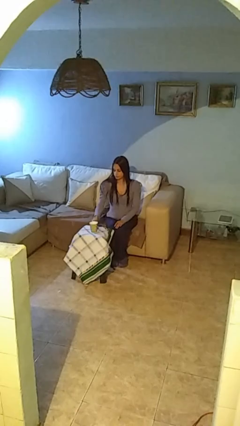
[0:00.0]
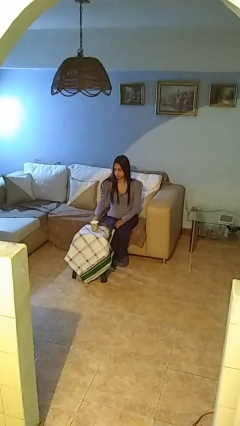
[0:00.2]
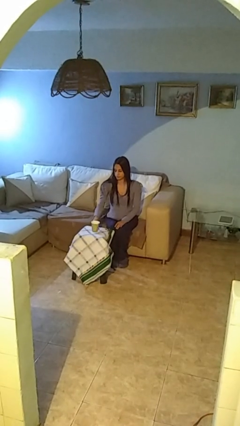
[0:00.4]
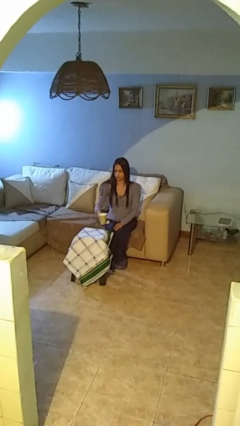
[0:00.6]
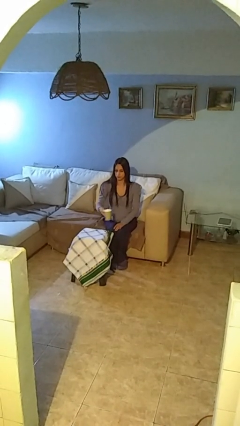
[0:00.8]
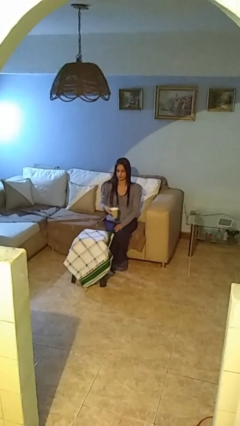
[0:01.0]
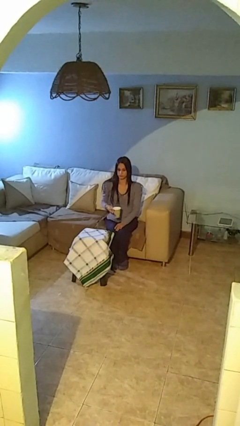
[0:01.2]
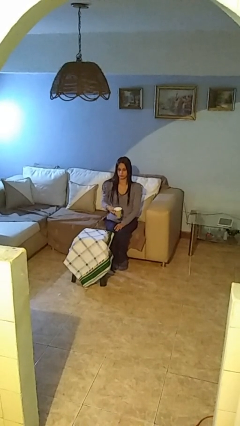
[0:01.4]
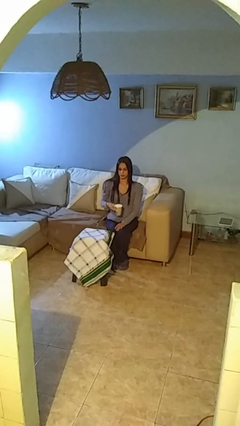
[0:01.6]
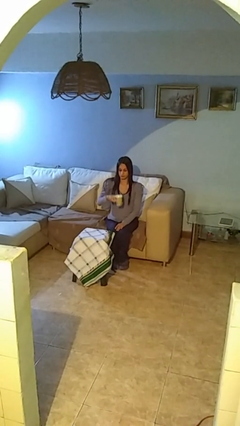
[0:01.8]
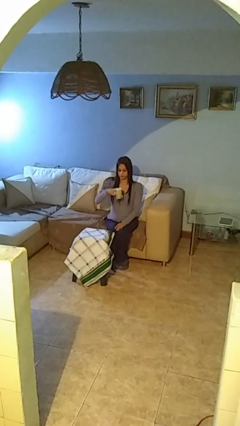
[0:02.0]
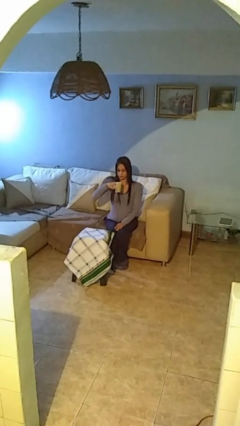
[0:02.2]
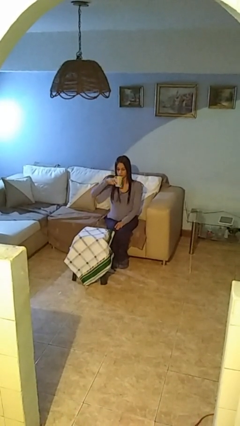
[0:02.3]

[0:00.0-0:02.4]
person picks up object from table

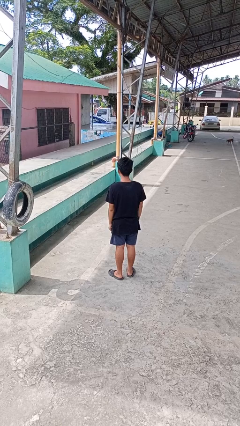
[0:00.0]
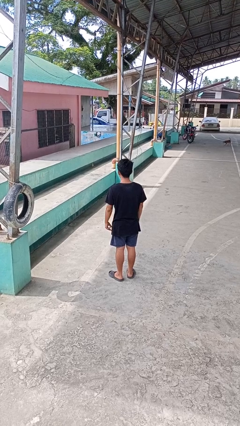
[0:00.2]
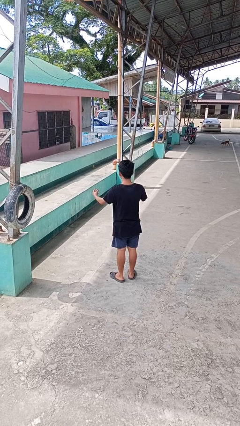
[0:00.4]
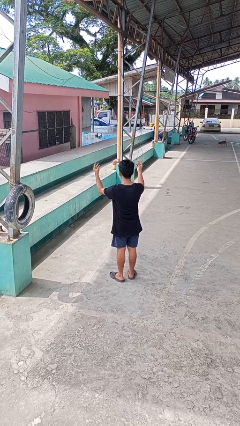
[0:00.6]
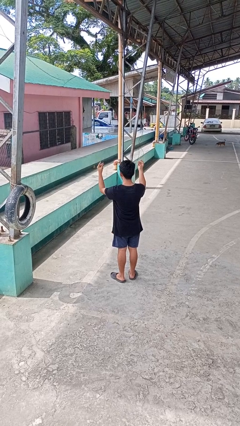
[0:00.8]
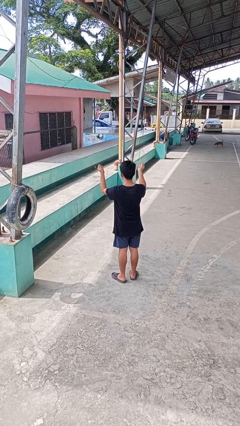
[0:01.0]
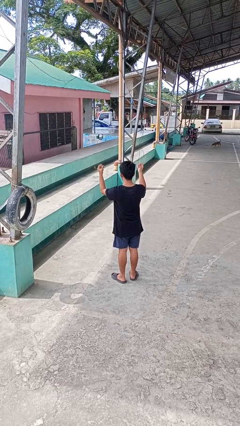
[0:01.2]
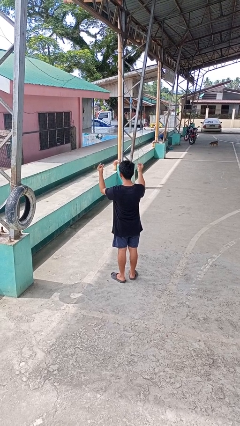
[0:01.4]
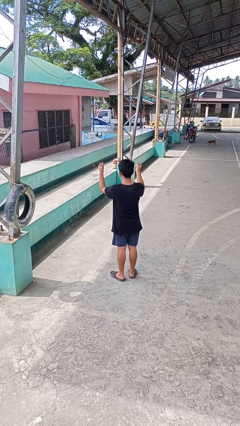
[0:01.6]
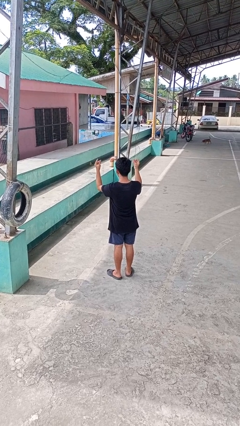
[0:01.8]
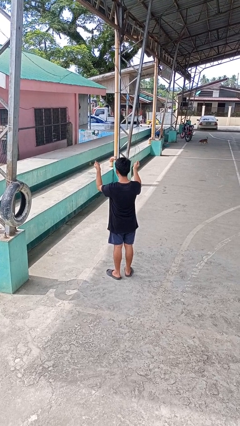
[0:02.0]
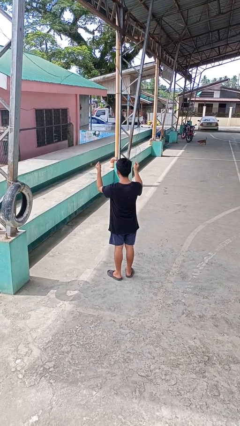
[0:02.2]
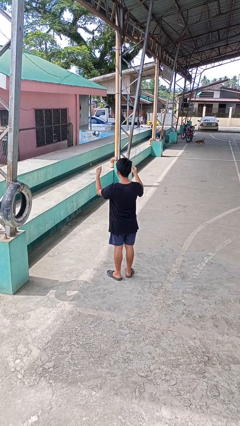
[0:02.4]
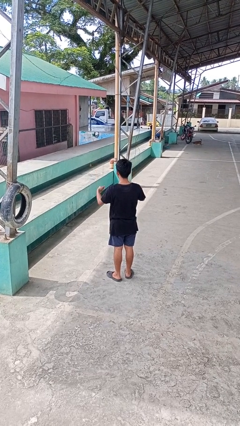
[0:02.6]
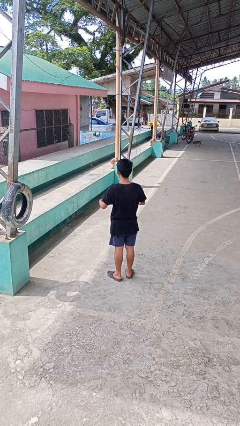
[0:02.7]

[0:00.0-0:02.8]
person snaps fingers

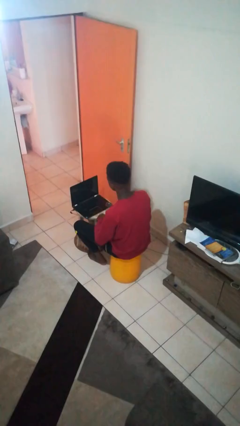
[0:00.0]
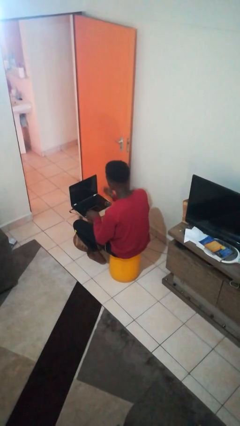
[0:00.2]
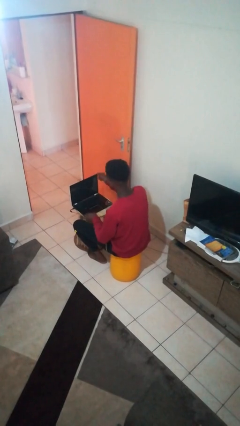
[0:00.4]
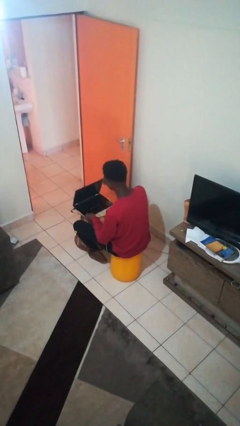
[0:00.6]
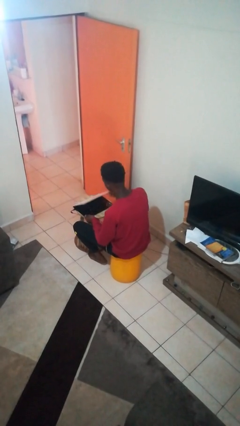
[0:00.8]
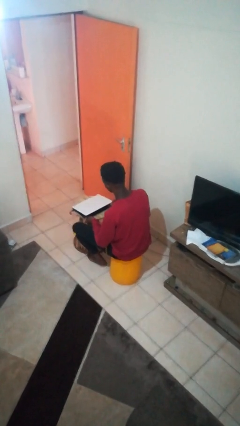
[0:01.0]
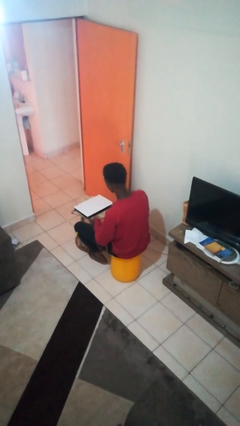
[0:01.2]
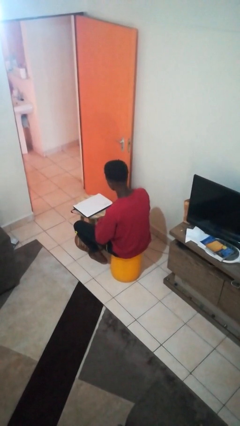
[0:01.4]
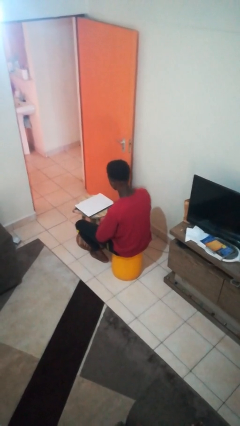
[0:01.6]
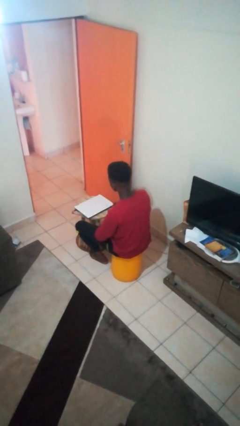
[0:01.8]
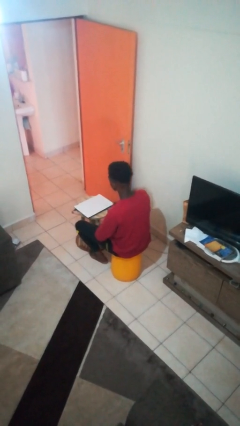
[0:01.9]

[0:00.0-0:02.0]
person closes laptop

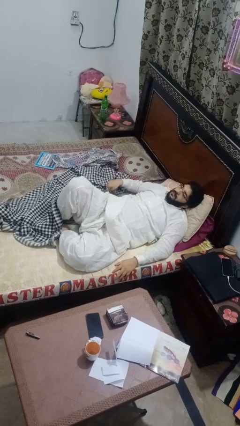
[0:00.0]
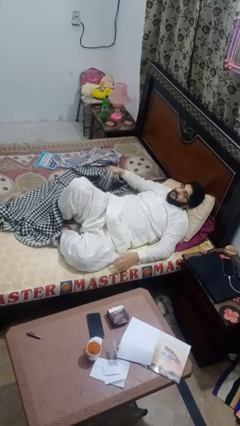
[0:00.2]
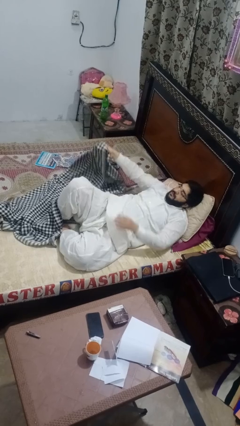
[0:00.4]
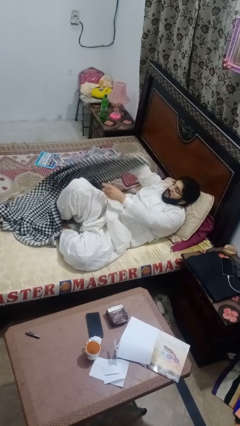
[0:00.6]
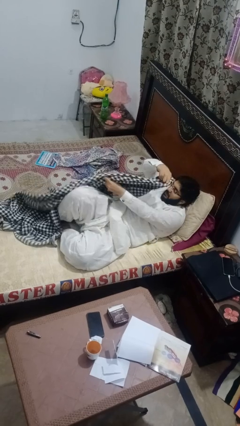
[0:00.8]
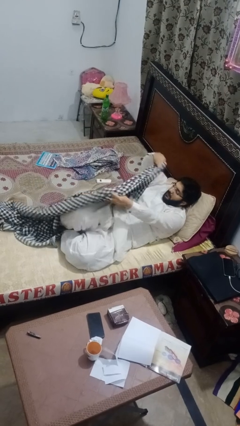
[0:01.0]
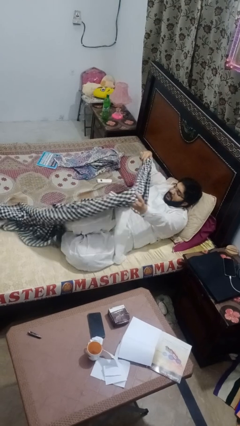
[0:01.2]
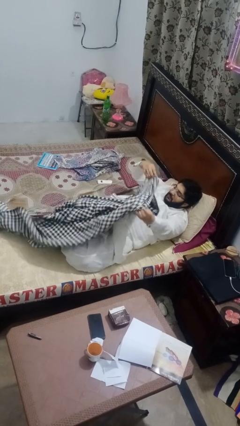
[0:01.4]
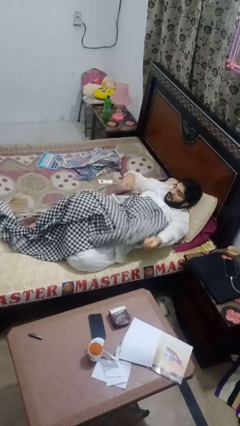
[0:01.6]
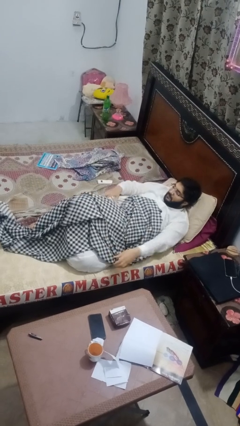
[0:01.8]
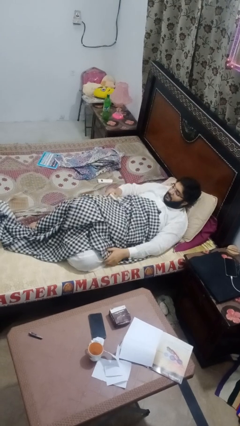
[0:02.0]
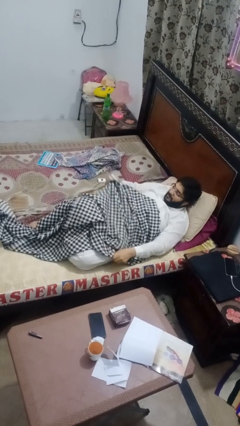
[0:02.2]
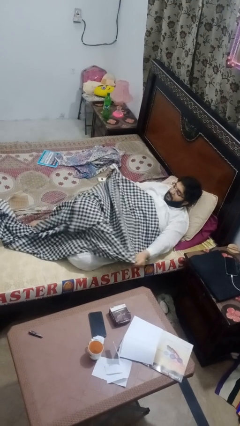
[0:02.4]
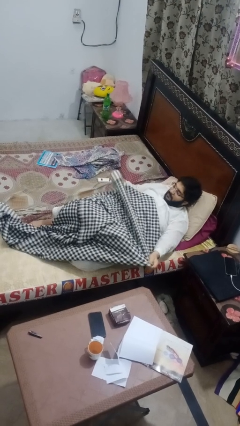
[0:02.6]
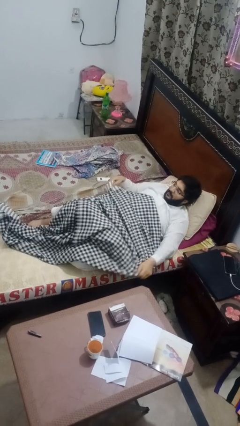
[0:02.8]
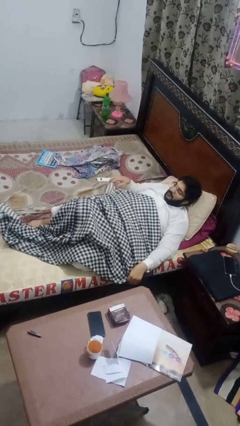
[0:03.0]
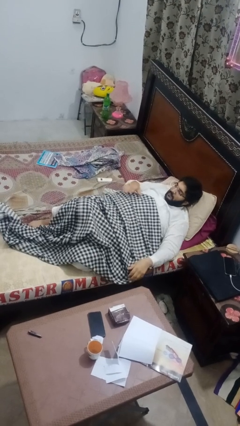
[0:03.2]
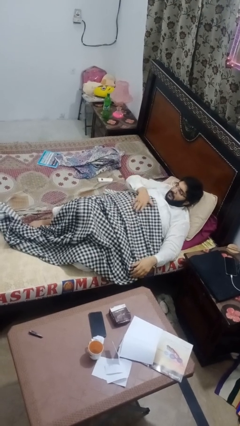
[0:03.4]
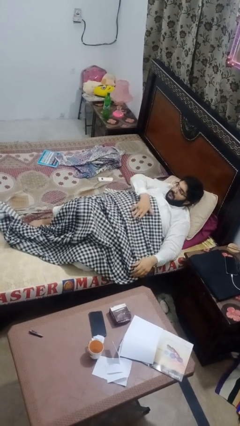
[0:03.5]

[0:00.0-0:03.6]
person covers with blanket

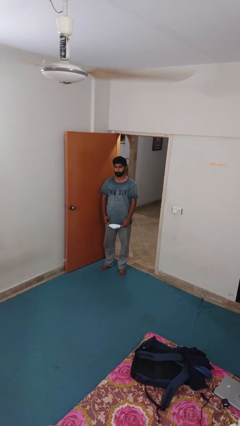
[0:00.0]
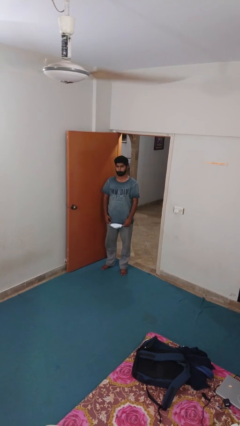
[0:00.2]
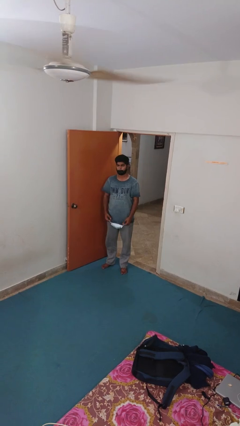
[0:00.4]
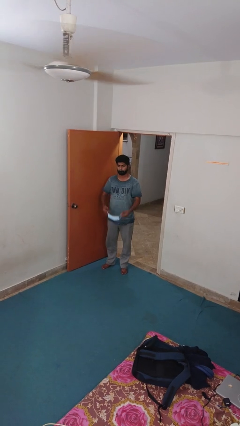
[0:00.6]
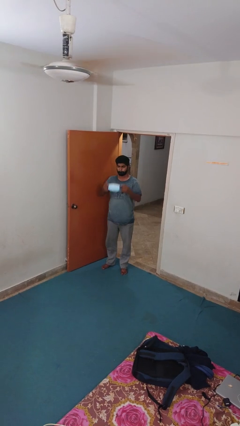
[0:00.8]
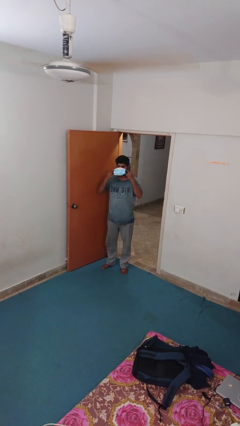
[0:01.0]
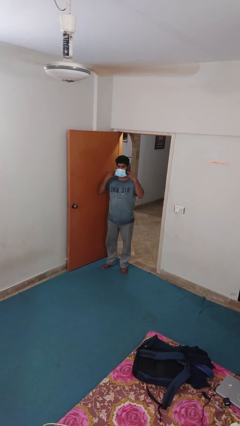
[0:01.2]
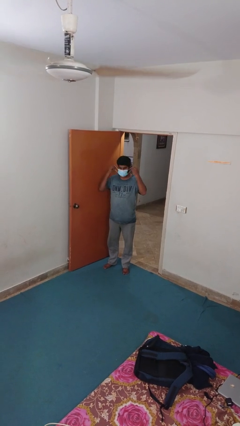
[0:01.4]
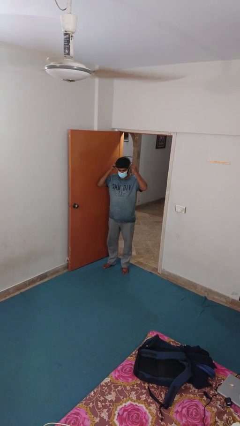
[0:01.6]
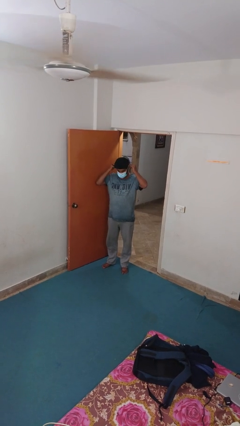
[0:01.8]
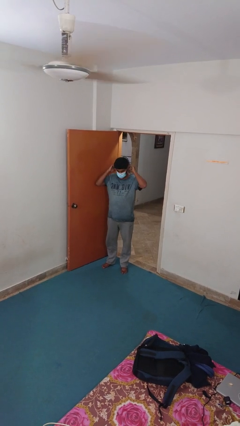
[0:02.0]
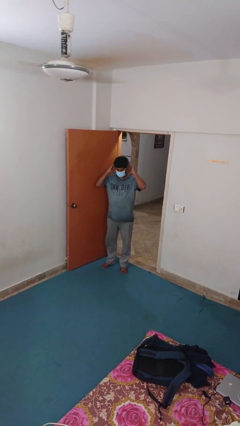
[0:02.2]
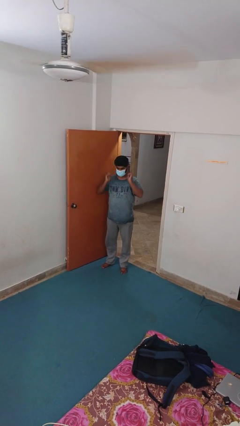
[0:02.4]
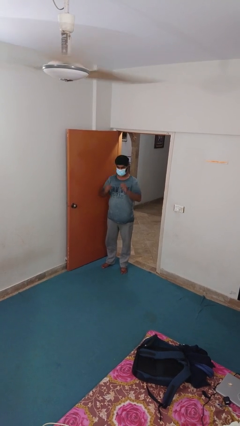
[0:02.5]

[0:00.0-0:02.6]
person puts on facemask

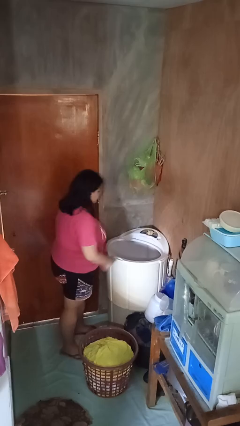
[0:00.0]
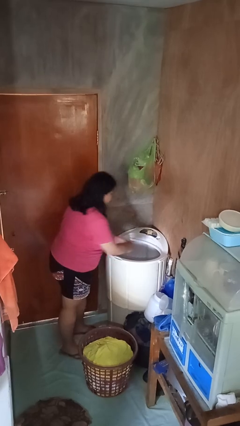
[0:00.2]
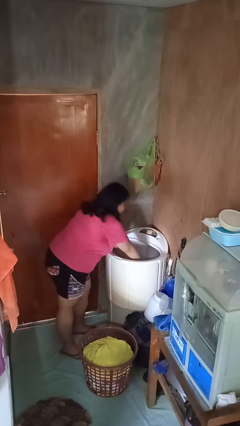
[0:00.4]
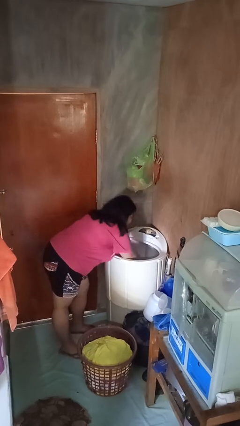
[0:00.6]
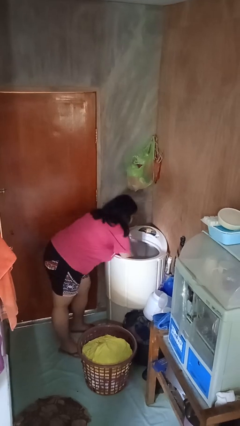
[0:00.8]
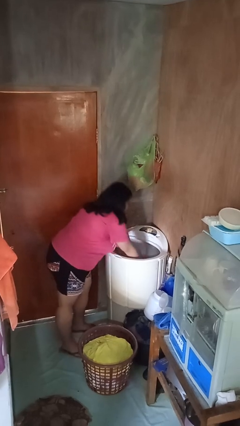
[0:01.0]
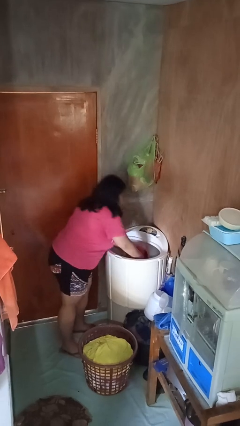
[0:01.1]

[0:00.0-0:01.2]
person unloads clotheswasher

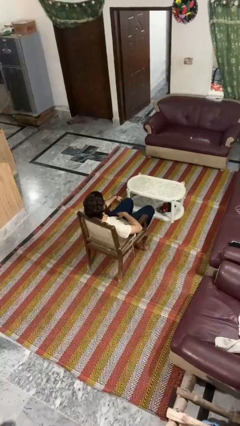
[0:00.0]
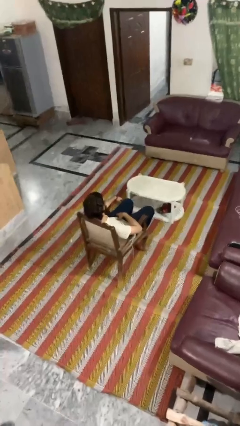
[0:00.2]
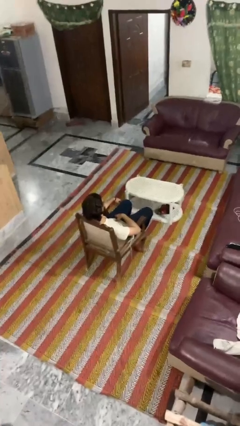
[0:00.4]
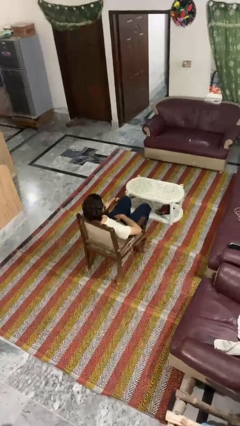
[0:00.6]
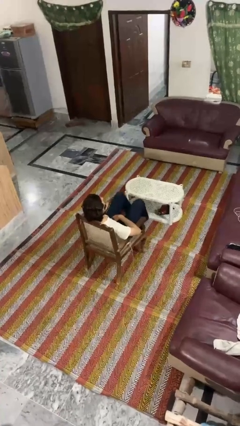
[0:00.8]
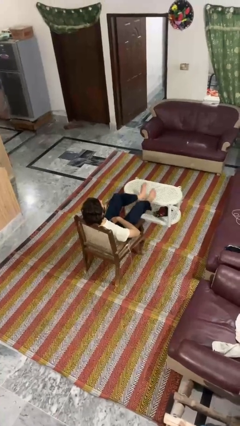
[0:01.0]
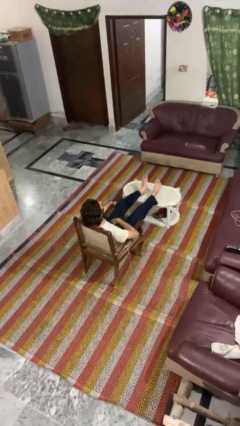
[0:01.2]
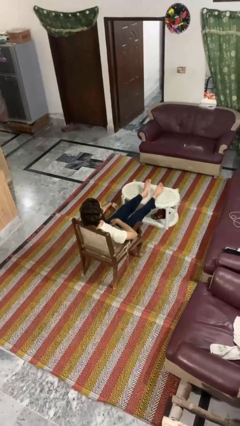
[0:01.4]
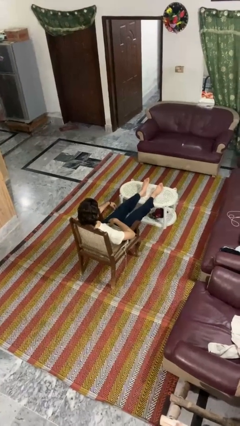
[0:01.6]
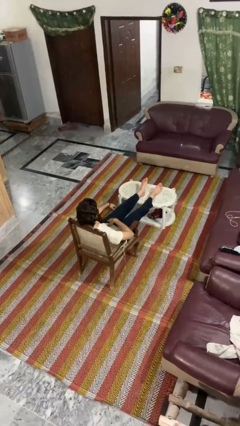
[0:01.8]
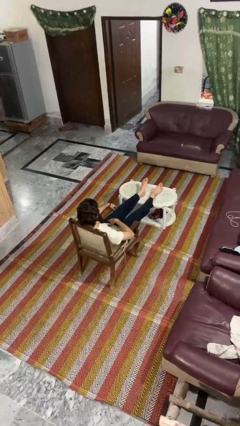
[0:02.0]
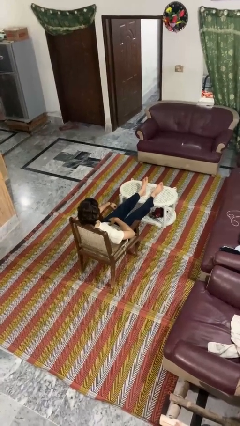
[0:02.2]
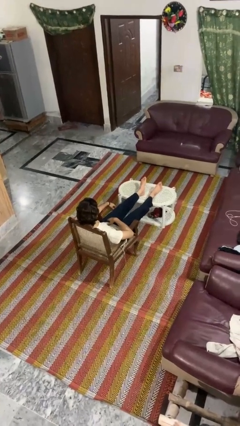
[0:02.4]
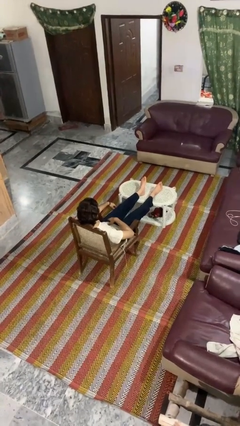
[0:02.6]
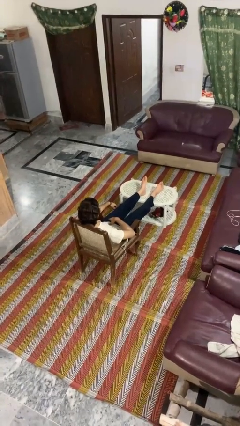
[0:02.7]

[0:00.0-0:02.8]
person puts feet up
